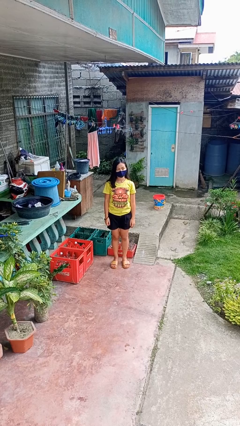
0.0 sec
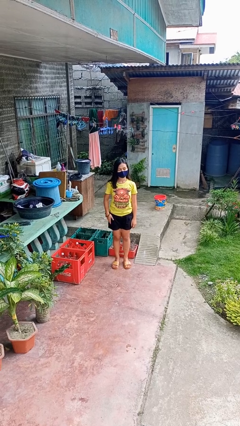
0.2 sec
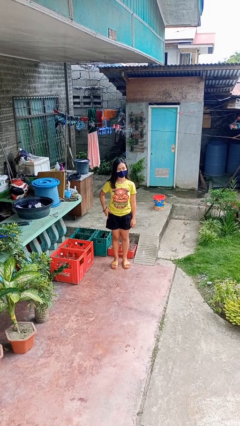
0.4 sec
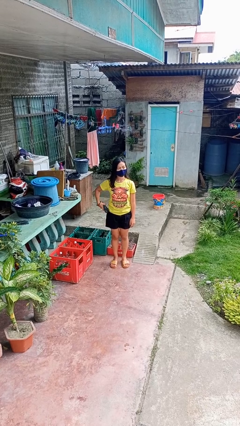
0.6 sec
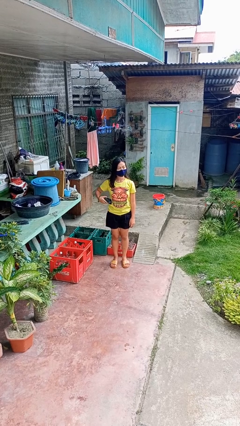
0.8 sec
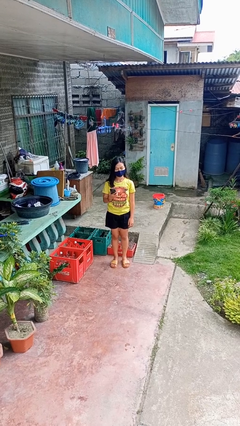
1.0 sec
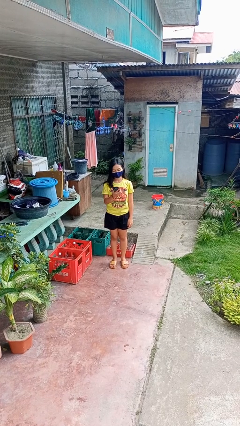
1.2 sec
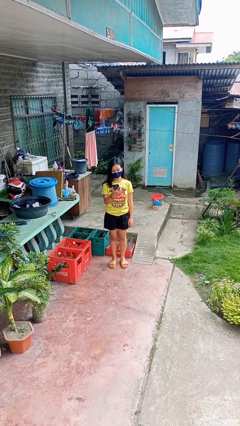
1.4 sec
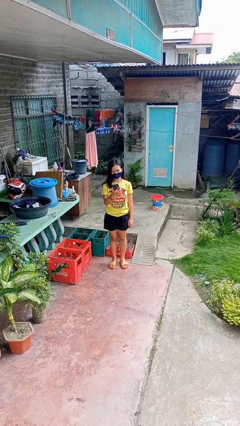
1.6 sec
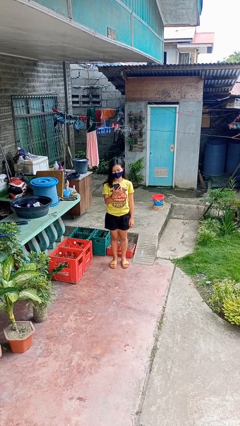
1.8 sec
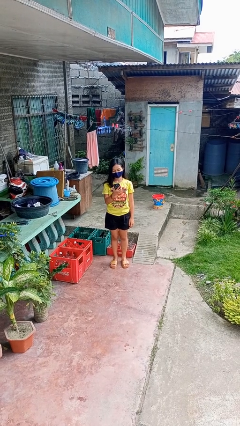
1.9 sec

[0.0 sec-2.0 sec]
person takes phone from pocket

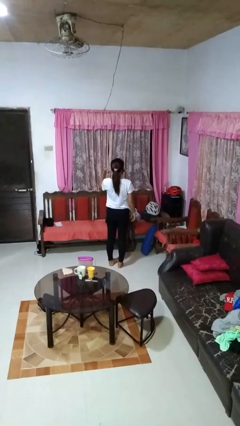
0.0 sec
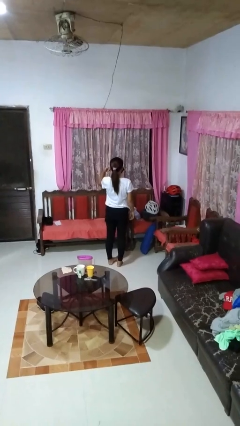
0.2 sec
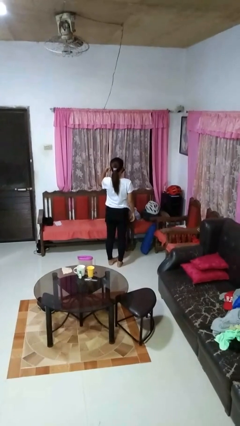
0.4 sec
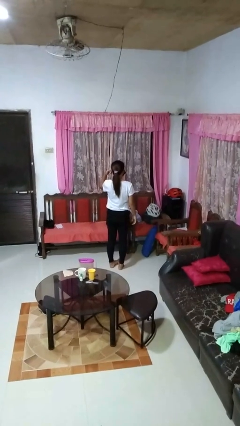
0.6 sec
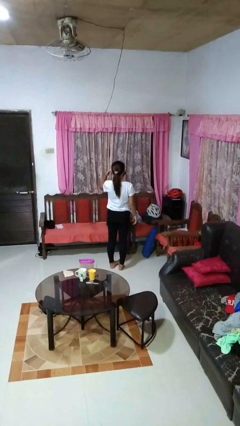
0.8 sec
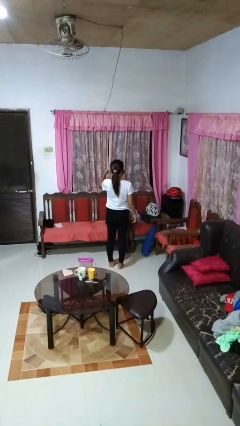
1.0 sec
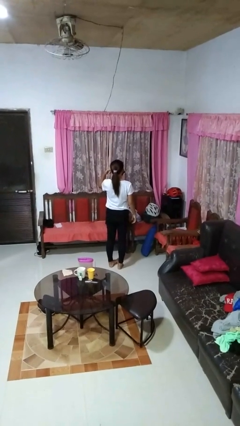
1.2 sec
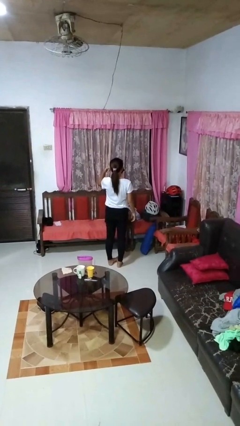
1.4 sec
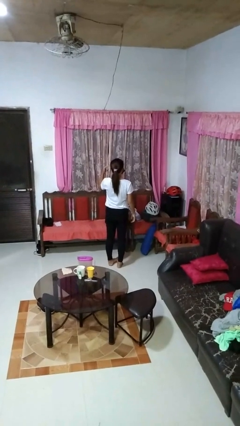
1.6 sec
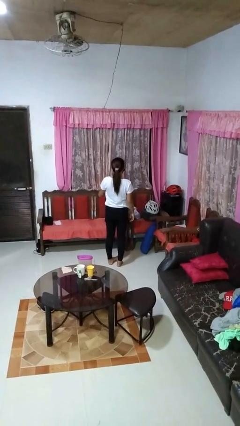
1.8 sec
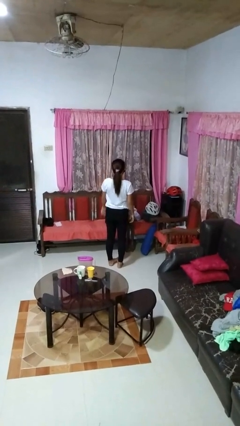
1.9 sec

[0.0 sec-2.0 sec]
person gestures listen closely

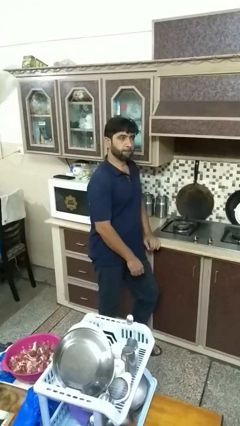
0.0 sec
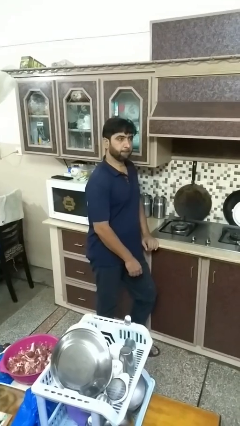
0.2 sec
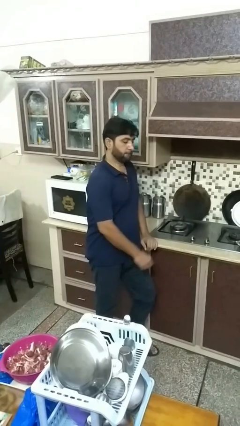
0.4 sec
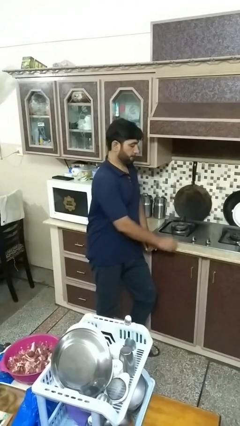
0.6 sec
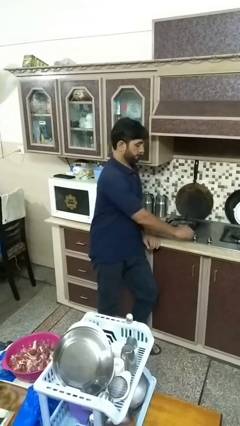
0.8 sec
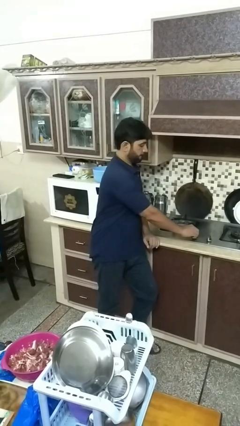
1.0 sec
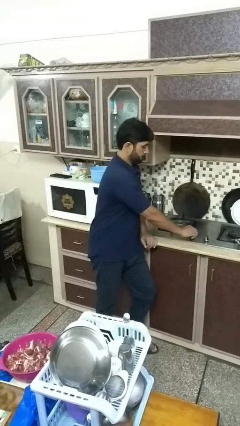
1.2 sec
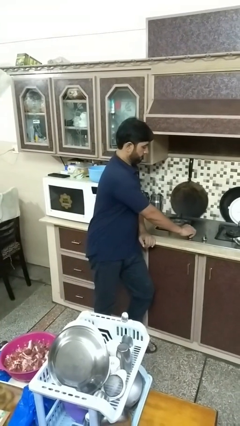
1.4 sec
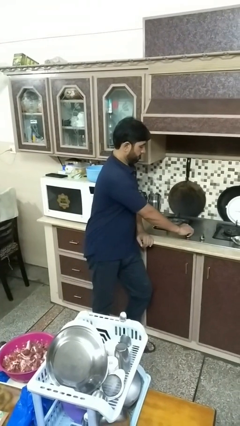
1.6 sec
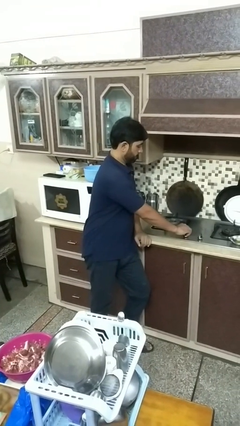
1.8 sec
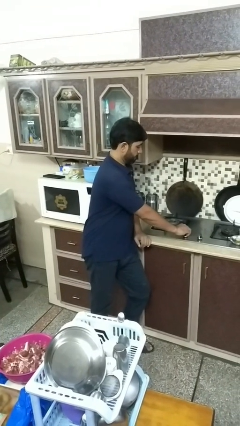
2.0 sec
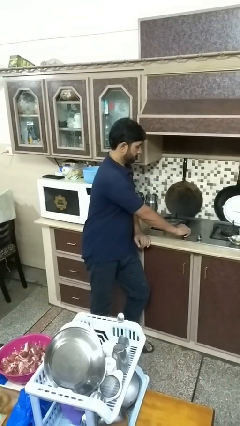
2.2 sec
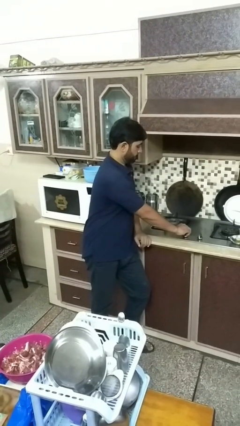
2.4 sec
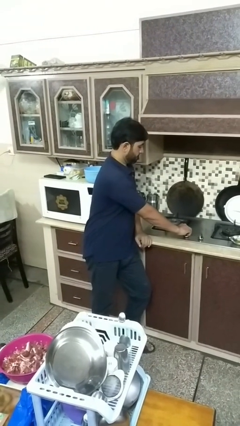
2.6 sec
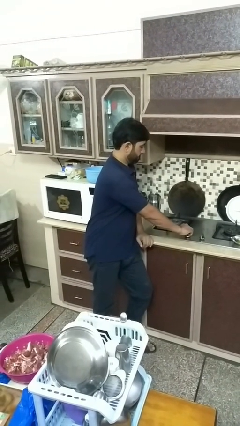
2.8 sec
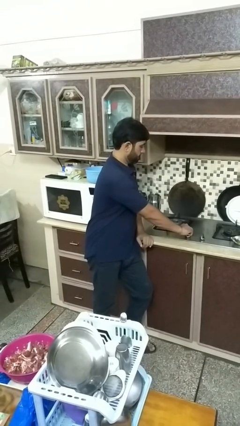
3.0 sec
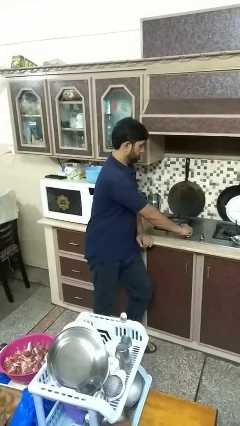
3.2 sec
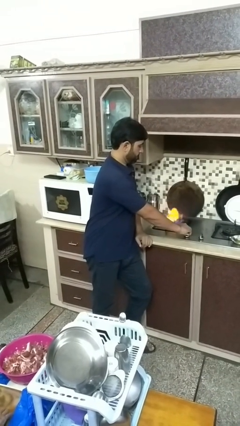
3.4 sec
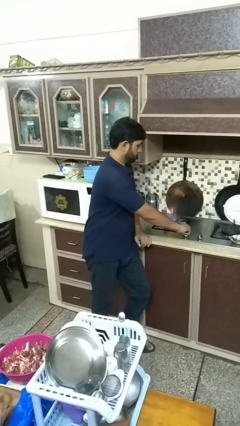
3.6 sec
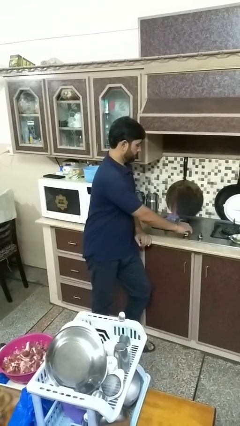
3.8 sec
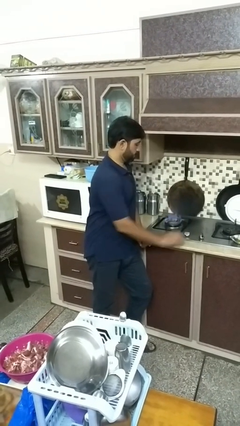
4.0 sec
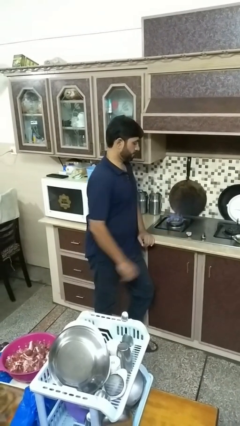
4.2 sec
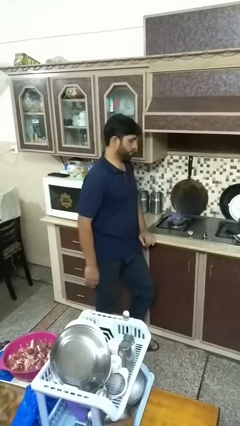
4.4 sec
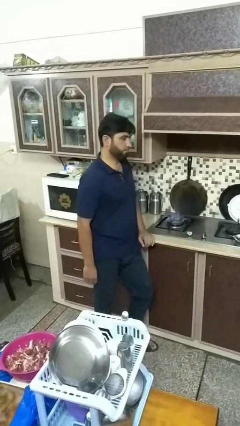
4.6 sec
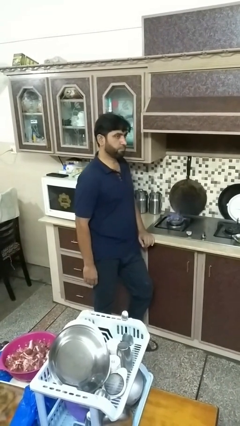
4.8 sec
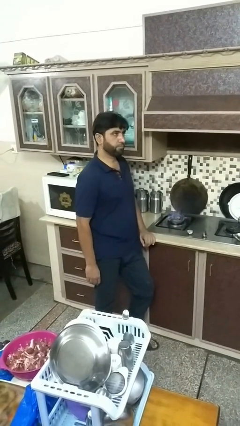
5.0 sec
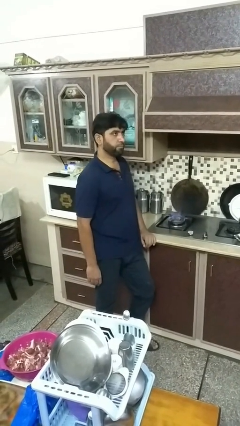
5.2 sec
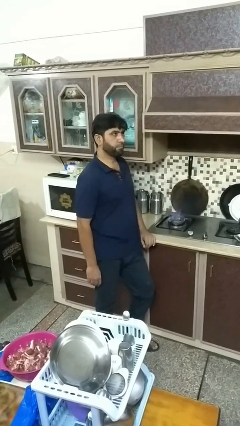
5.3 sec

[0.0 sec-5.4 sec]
person turns on stovetop

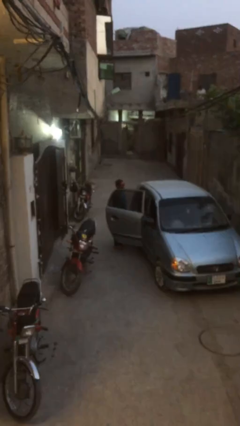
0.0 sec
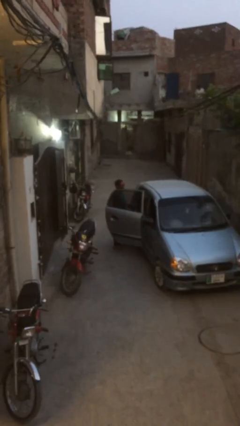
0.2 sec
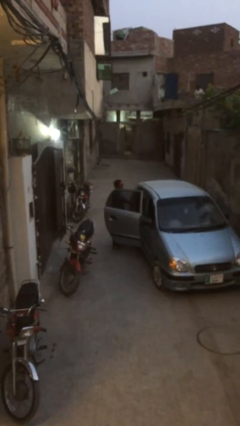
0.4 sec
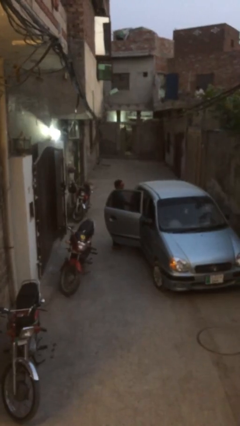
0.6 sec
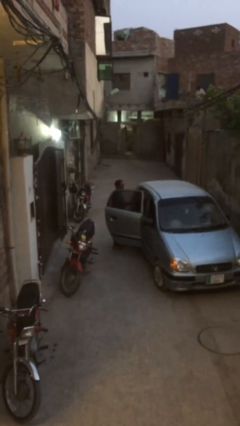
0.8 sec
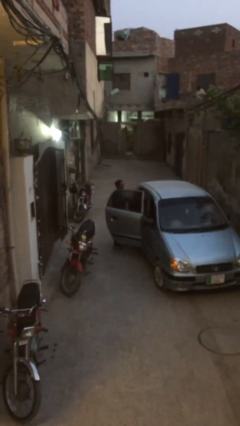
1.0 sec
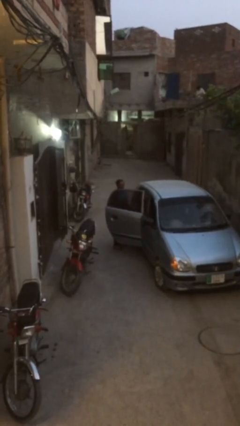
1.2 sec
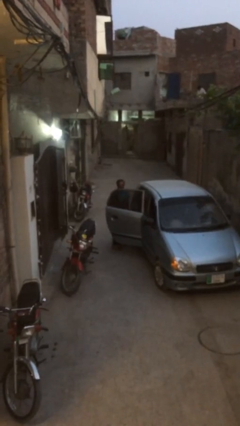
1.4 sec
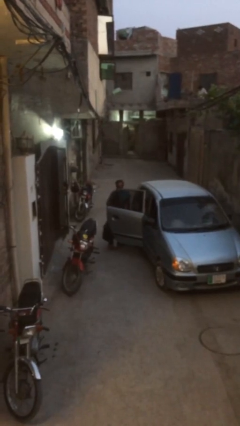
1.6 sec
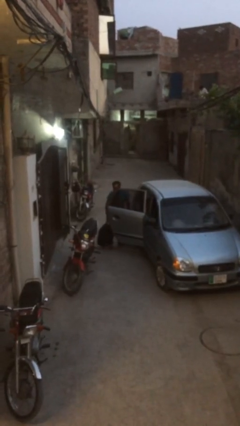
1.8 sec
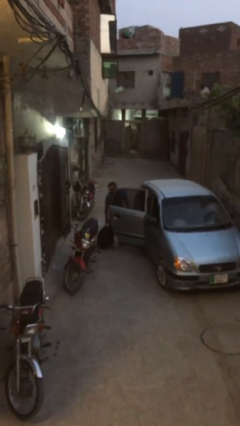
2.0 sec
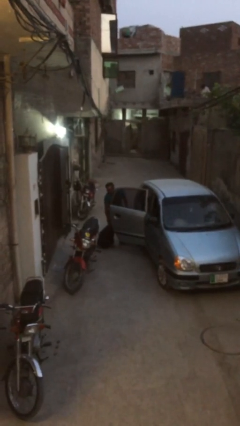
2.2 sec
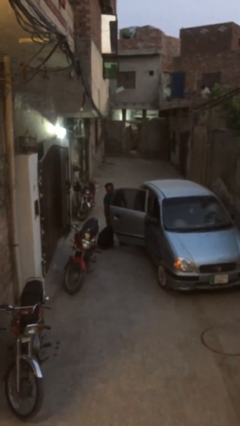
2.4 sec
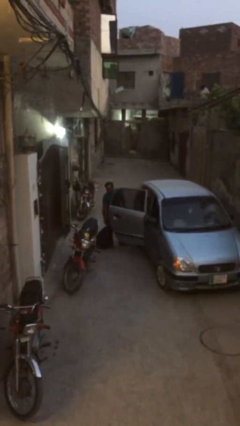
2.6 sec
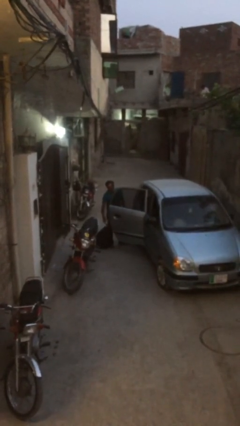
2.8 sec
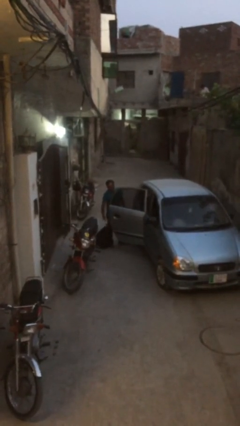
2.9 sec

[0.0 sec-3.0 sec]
person unloads car

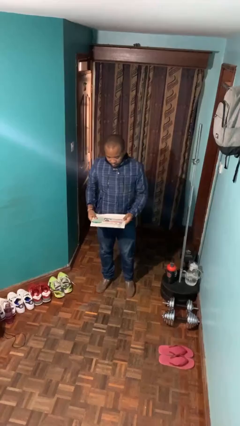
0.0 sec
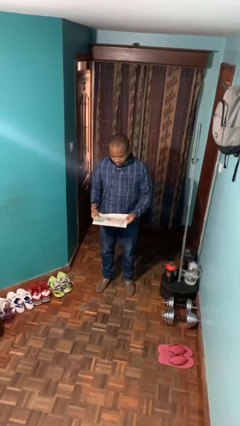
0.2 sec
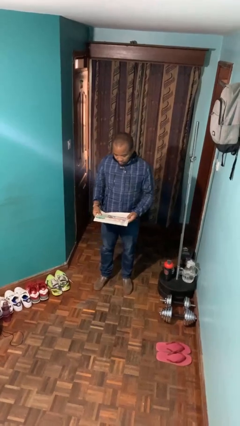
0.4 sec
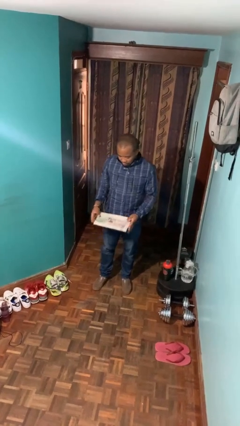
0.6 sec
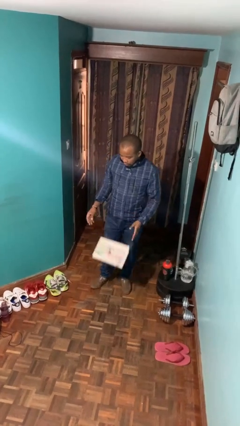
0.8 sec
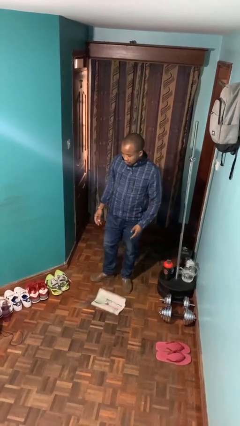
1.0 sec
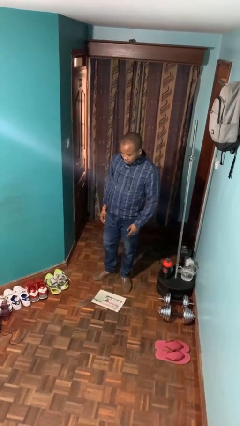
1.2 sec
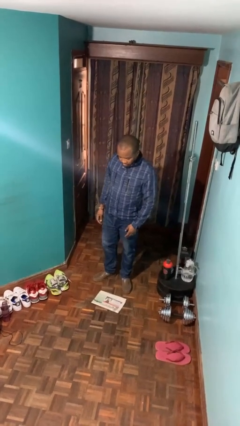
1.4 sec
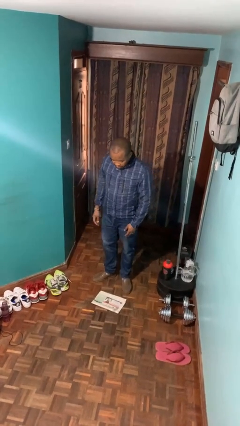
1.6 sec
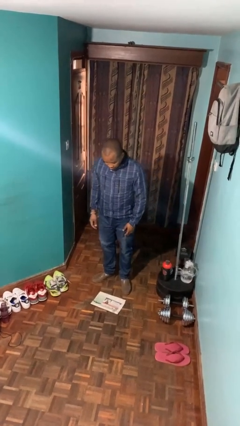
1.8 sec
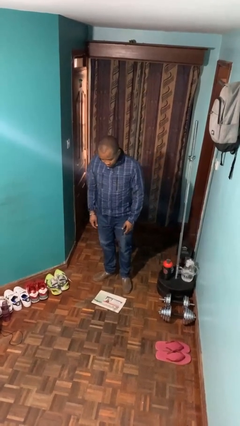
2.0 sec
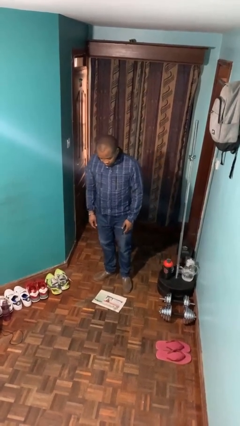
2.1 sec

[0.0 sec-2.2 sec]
person drops object

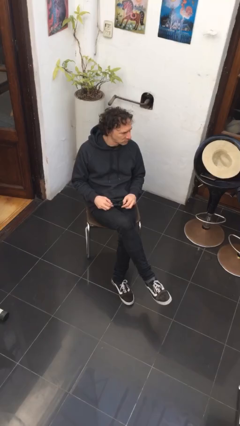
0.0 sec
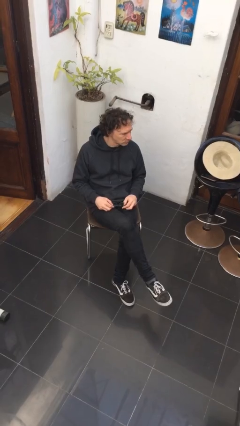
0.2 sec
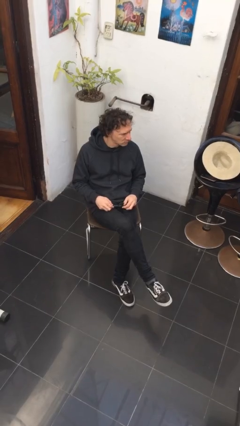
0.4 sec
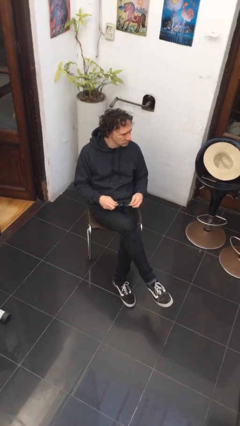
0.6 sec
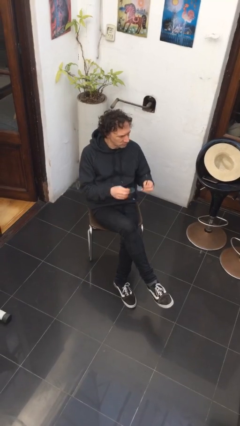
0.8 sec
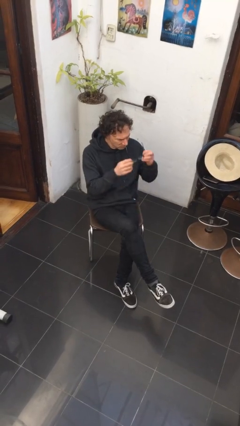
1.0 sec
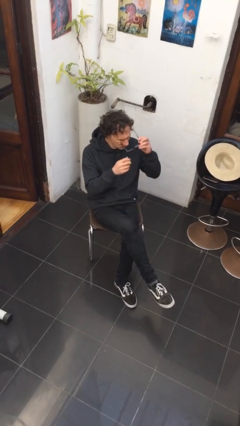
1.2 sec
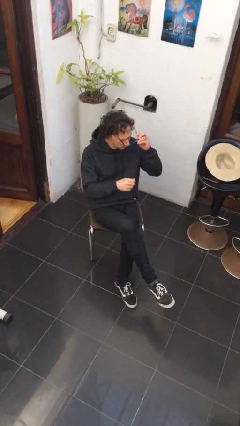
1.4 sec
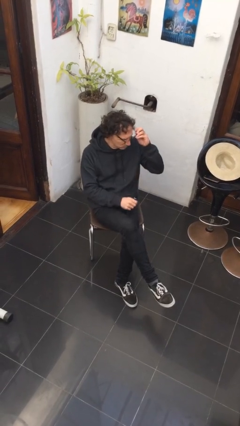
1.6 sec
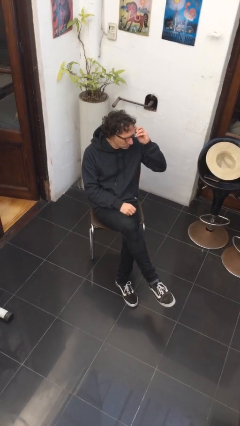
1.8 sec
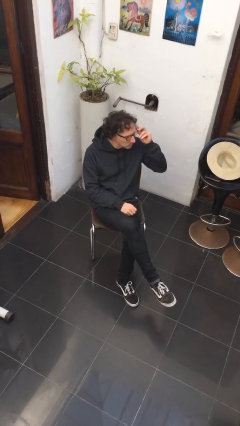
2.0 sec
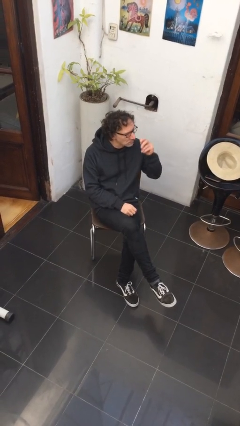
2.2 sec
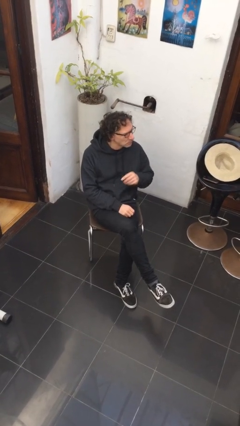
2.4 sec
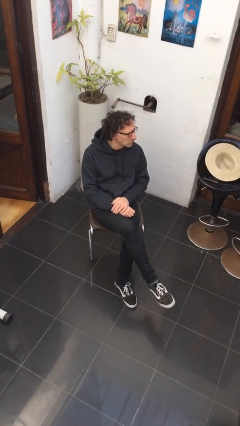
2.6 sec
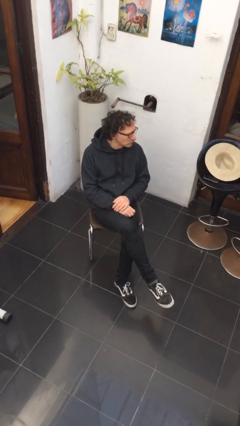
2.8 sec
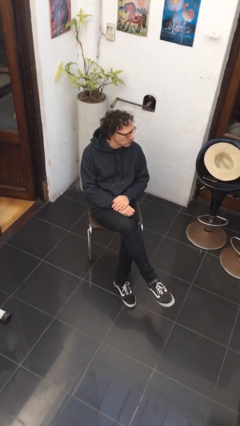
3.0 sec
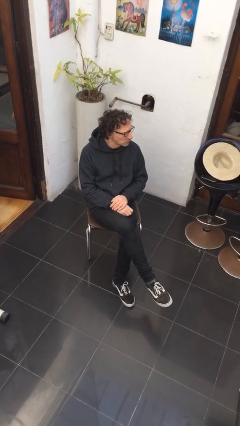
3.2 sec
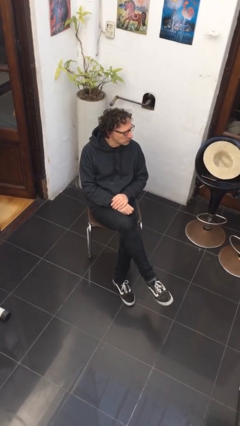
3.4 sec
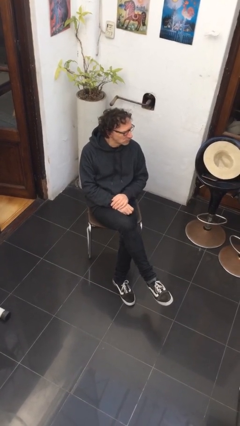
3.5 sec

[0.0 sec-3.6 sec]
person puts on glasses
